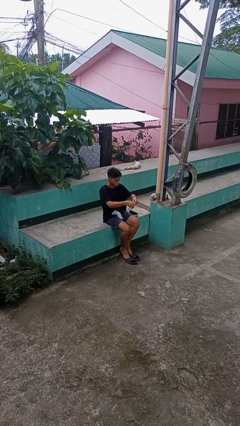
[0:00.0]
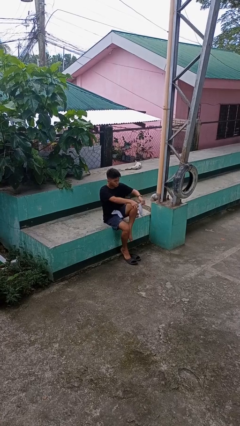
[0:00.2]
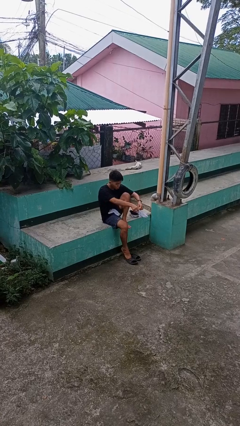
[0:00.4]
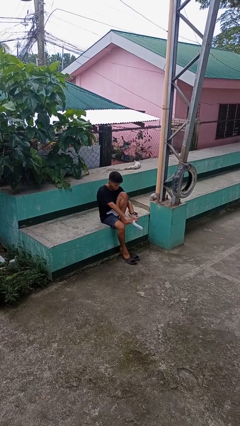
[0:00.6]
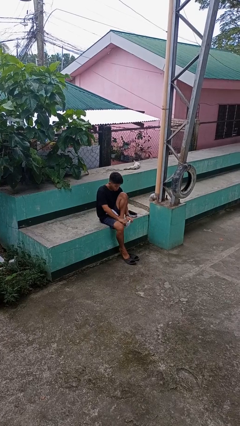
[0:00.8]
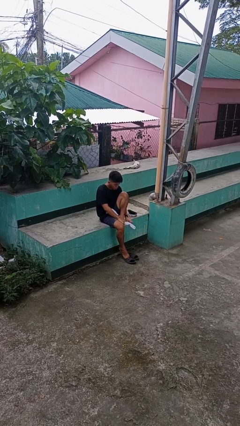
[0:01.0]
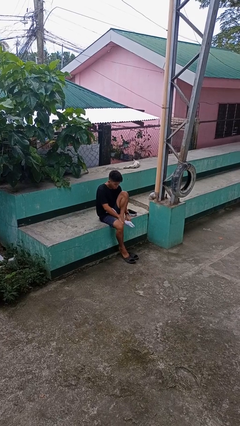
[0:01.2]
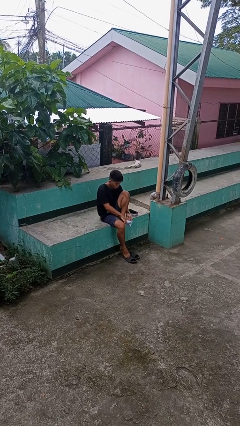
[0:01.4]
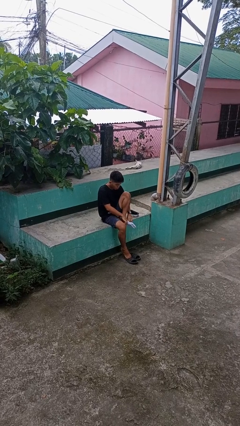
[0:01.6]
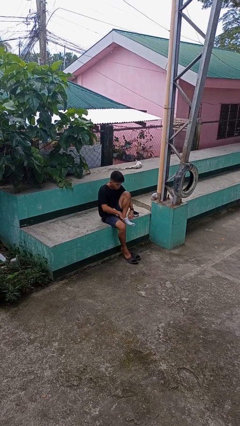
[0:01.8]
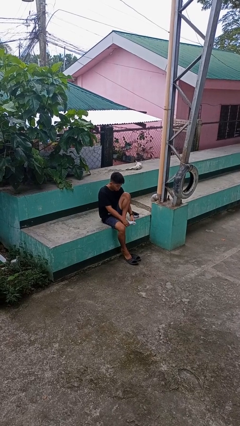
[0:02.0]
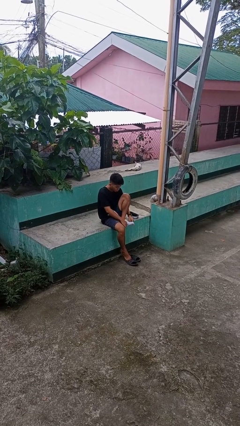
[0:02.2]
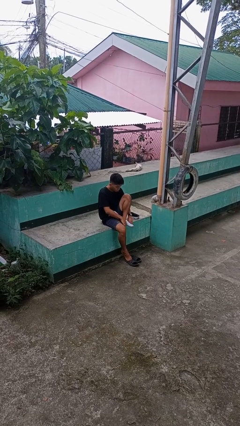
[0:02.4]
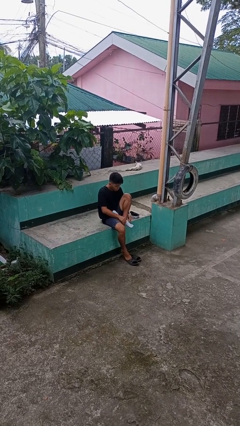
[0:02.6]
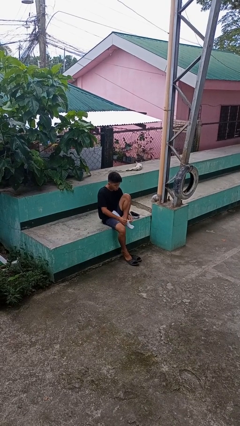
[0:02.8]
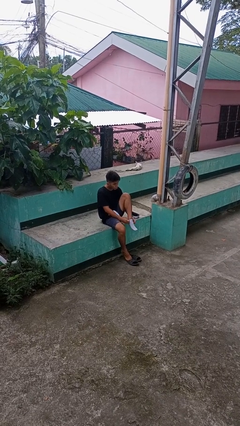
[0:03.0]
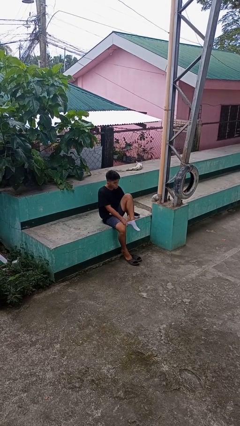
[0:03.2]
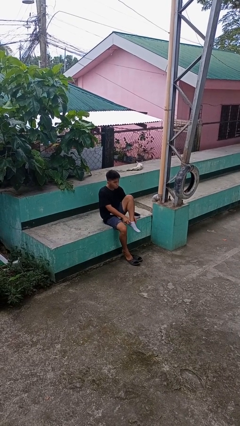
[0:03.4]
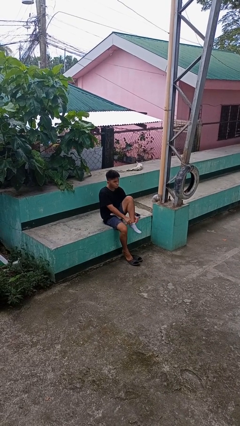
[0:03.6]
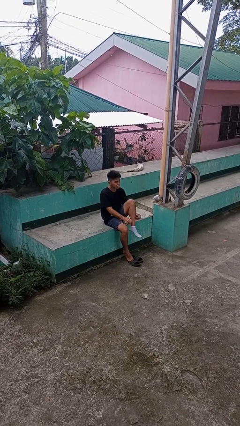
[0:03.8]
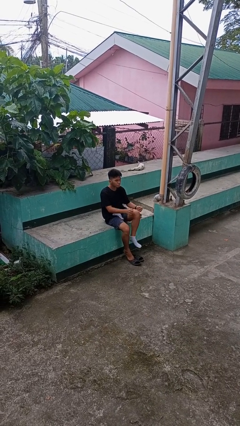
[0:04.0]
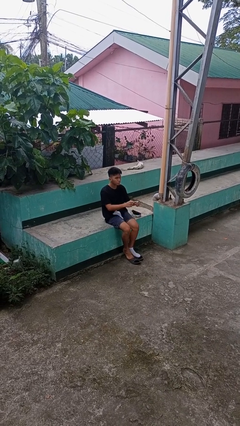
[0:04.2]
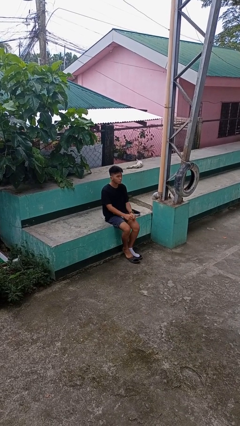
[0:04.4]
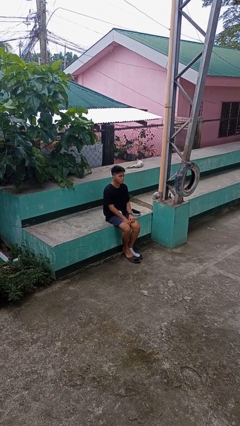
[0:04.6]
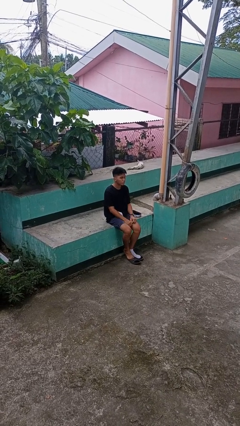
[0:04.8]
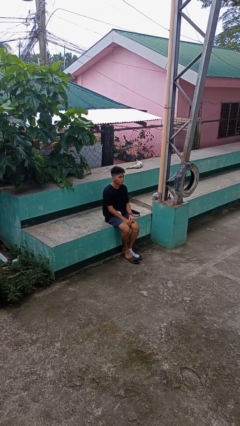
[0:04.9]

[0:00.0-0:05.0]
person puts on socks

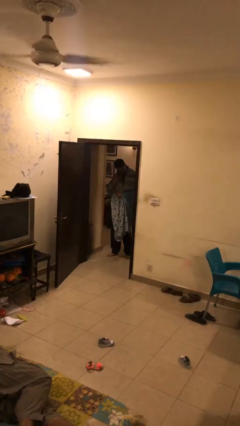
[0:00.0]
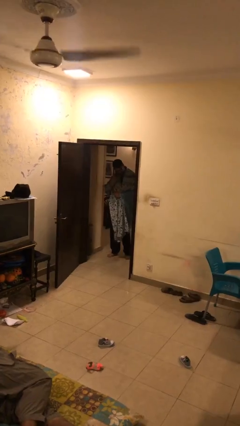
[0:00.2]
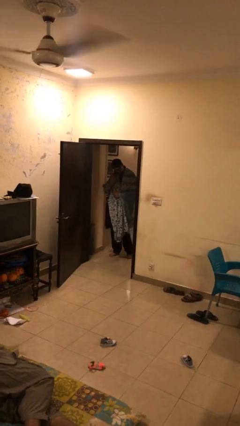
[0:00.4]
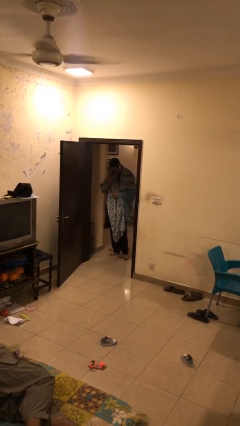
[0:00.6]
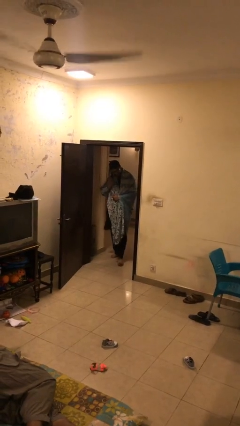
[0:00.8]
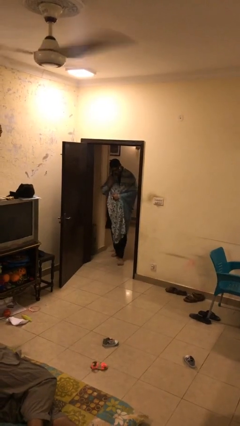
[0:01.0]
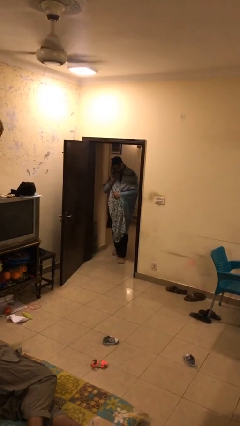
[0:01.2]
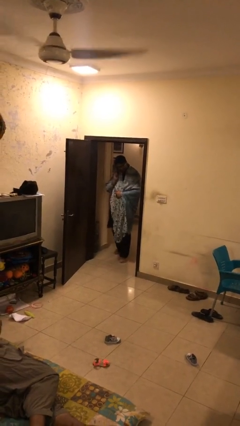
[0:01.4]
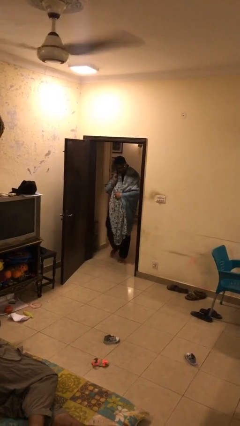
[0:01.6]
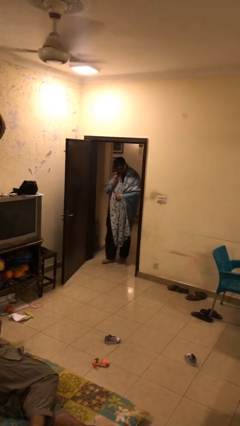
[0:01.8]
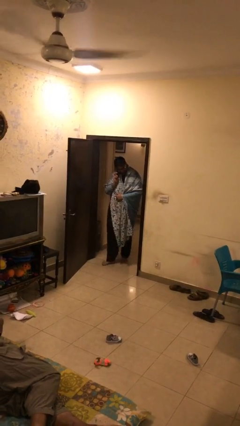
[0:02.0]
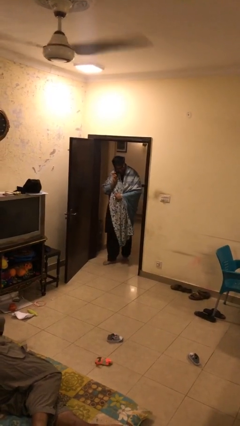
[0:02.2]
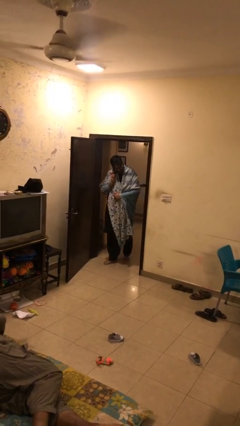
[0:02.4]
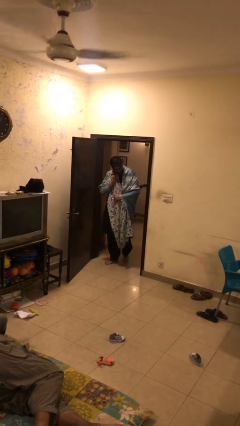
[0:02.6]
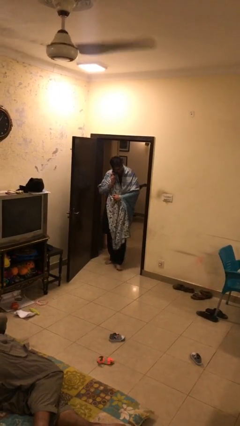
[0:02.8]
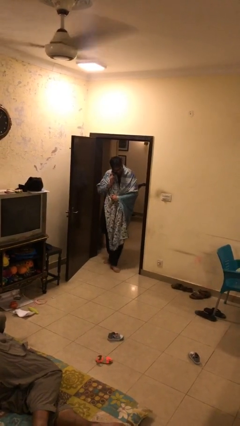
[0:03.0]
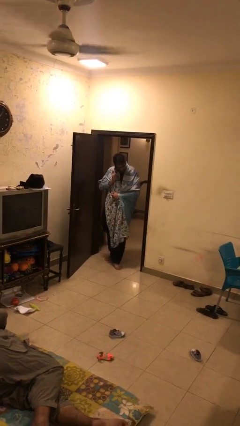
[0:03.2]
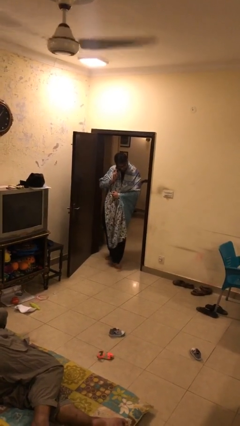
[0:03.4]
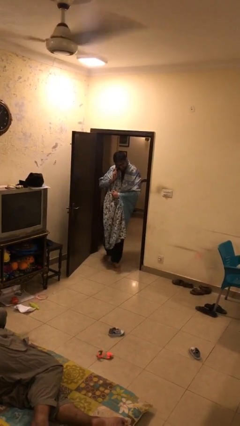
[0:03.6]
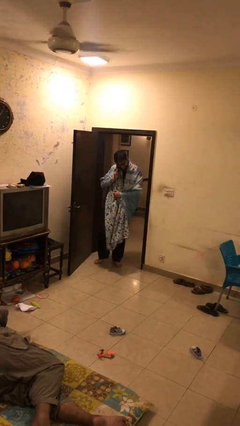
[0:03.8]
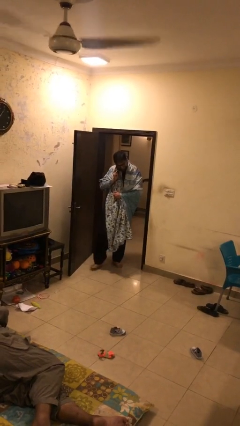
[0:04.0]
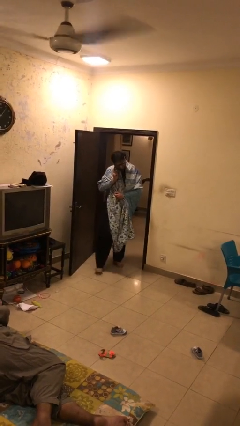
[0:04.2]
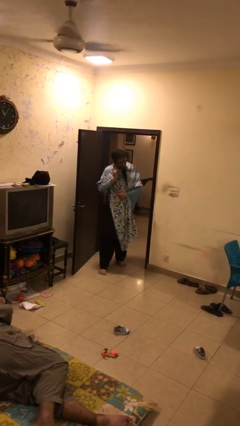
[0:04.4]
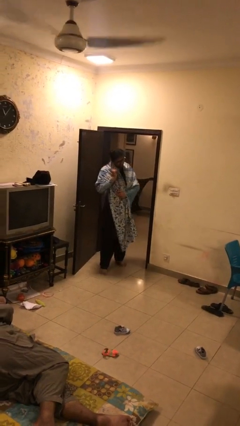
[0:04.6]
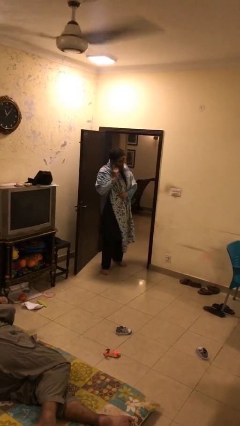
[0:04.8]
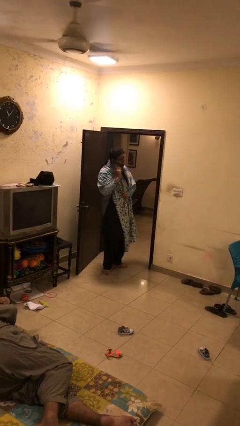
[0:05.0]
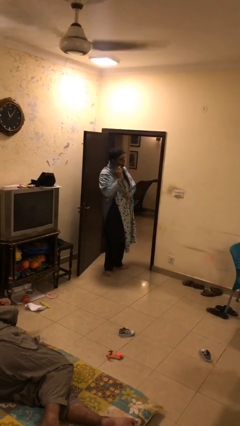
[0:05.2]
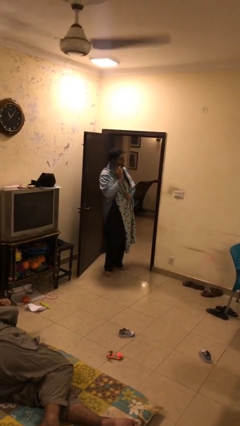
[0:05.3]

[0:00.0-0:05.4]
person enters scene through structure

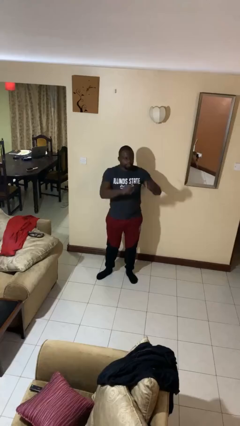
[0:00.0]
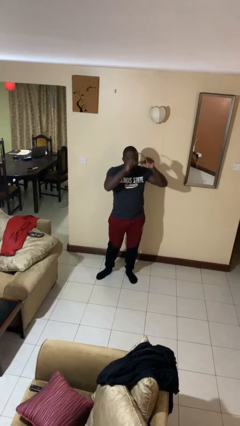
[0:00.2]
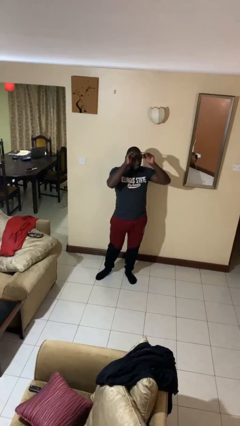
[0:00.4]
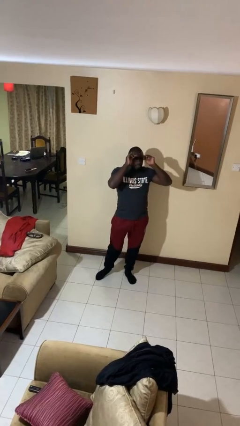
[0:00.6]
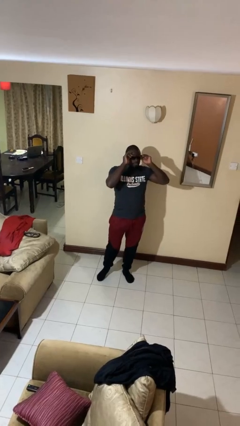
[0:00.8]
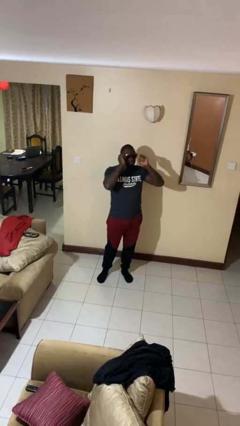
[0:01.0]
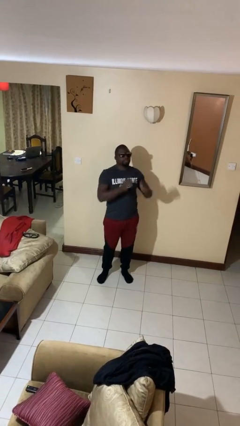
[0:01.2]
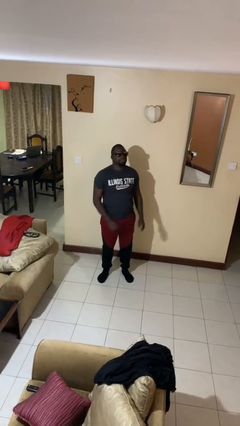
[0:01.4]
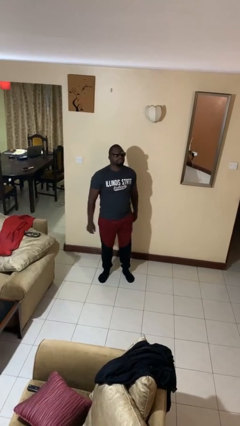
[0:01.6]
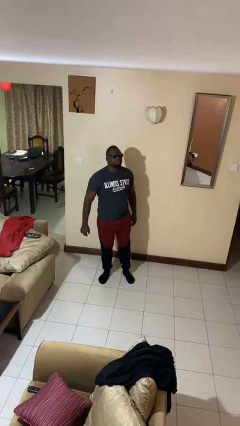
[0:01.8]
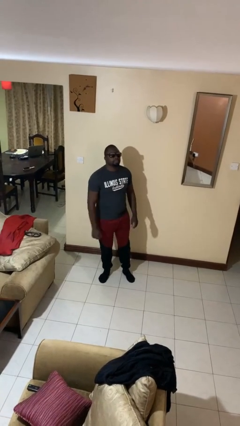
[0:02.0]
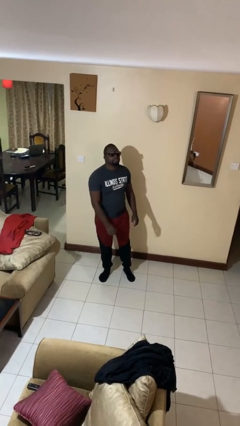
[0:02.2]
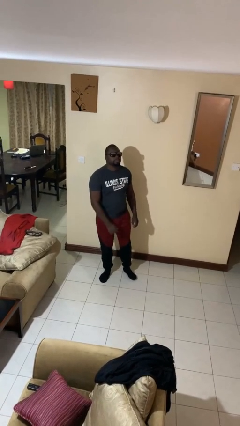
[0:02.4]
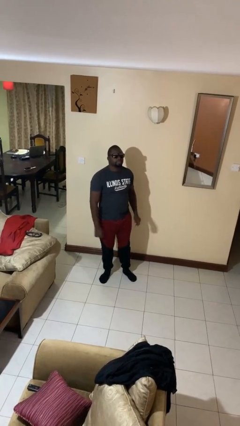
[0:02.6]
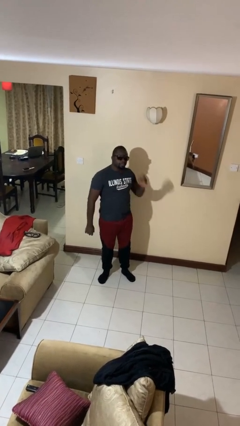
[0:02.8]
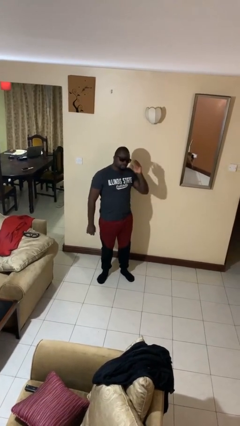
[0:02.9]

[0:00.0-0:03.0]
person puts on sunglasses

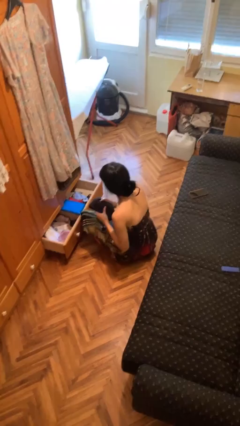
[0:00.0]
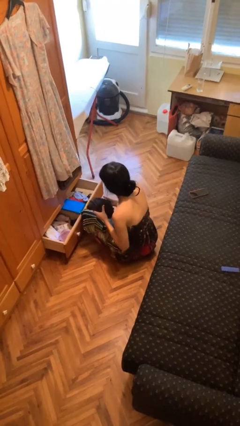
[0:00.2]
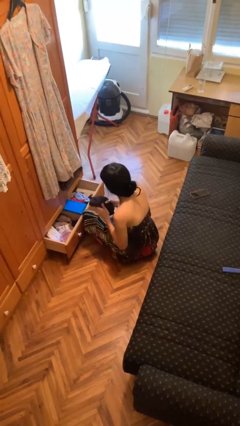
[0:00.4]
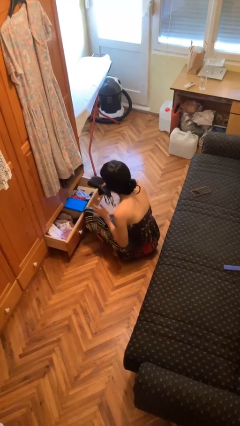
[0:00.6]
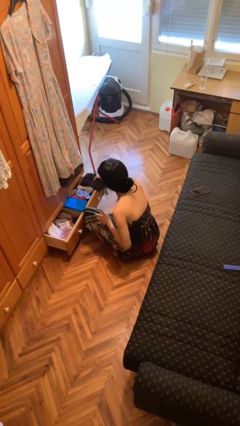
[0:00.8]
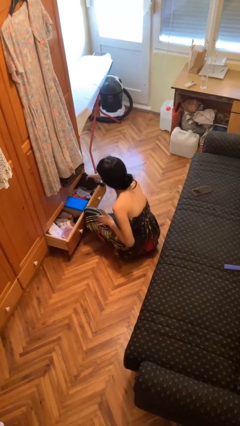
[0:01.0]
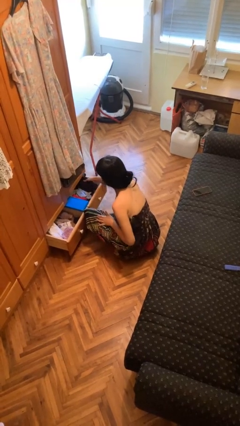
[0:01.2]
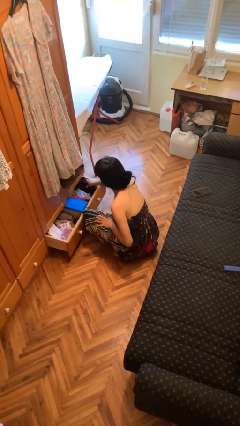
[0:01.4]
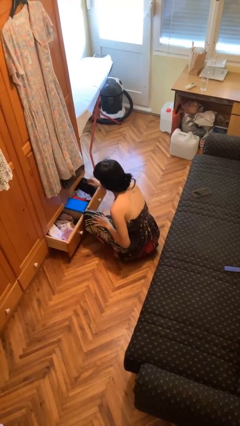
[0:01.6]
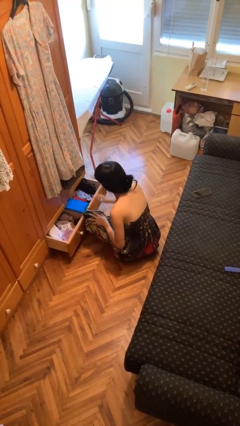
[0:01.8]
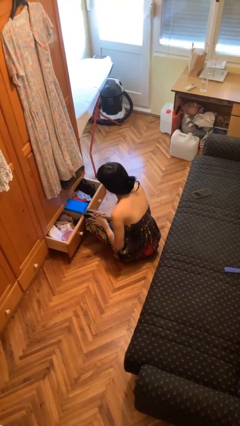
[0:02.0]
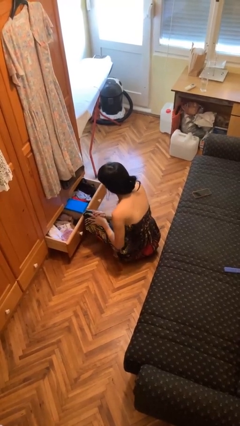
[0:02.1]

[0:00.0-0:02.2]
person puts clothes into dresser

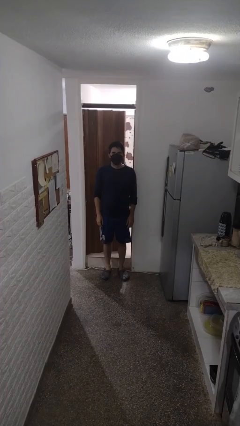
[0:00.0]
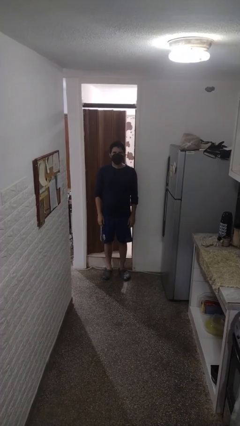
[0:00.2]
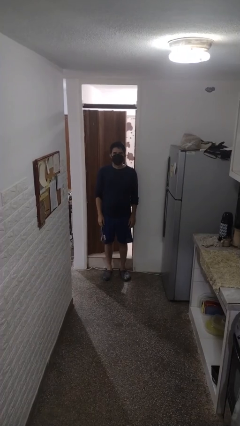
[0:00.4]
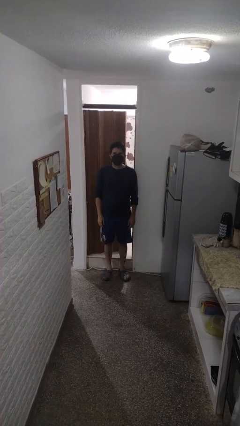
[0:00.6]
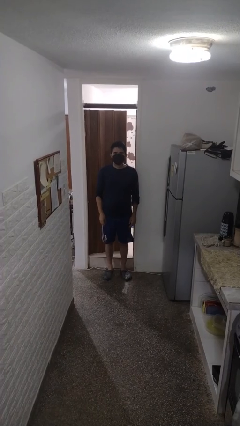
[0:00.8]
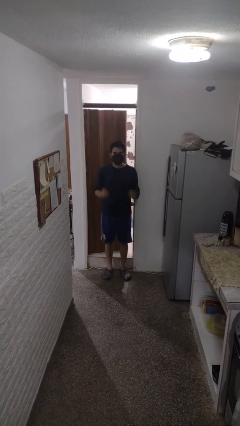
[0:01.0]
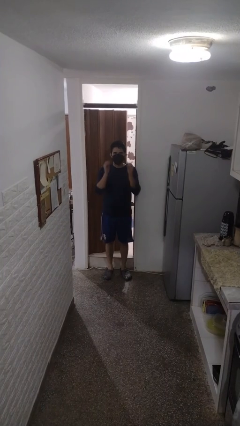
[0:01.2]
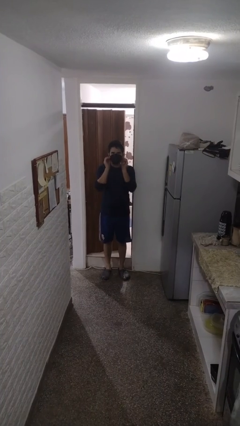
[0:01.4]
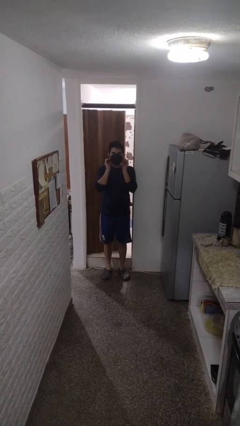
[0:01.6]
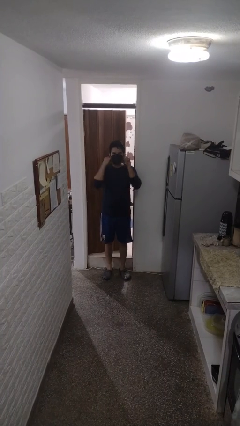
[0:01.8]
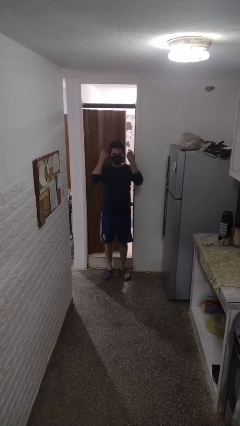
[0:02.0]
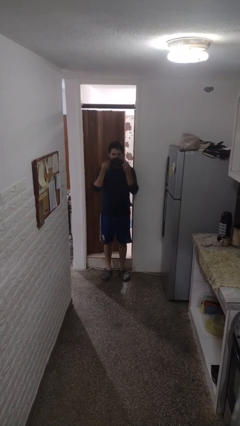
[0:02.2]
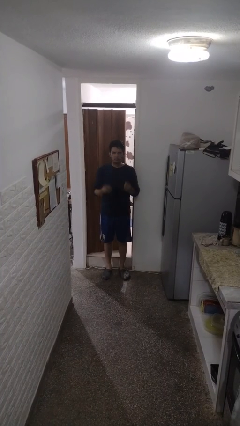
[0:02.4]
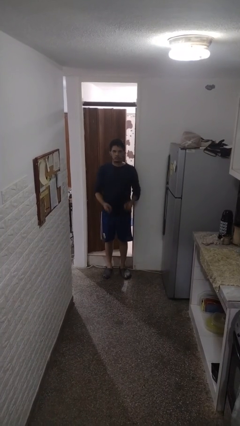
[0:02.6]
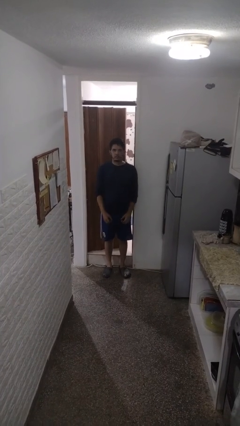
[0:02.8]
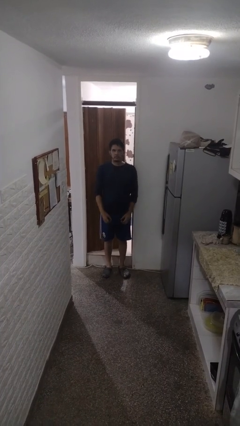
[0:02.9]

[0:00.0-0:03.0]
person takes off facemask
